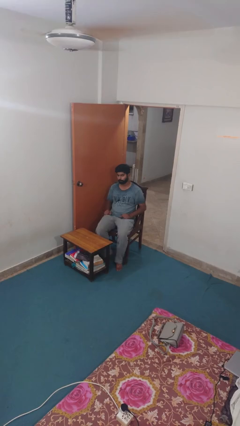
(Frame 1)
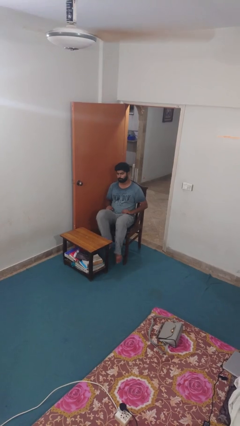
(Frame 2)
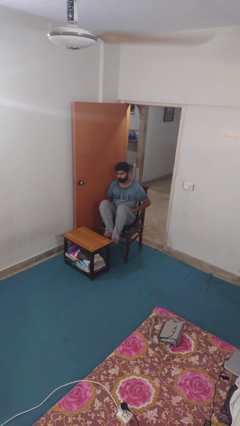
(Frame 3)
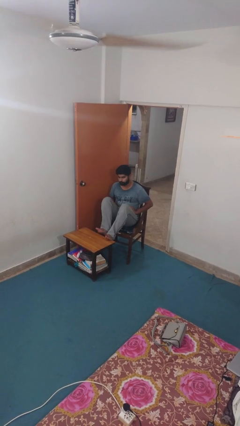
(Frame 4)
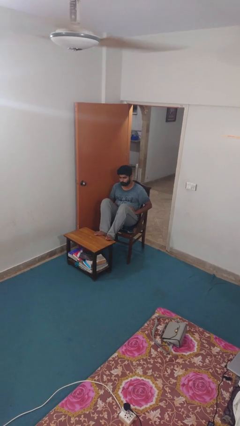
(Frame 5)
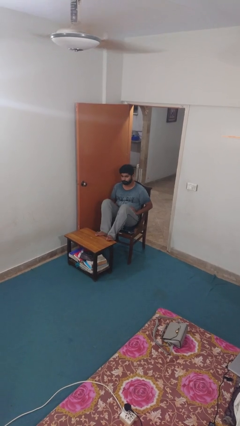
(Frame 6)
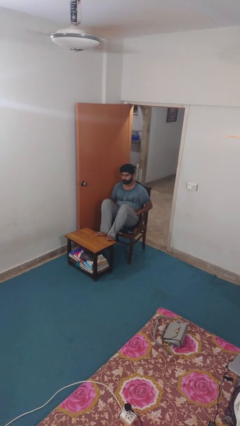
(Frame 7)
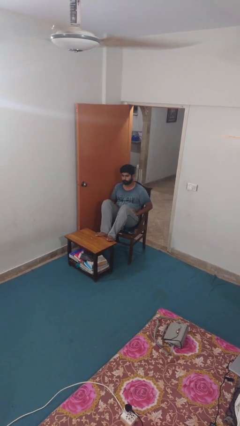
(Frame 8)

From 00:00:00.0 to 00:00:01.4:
person puts feet up

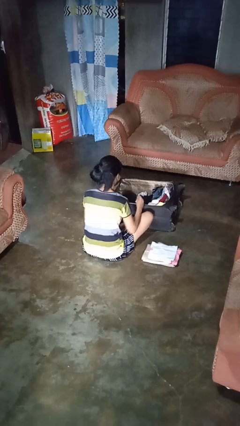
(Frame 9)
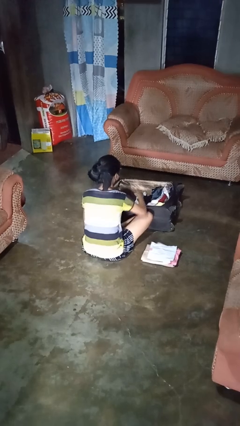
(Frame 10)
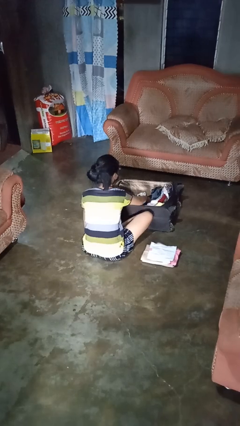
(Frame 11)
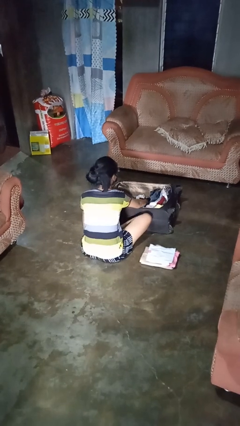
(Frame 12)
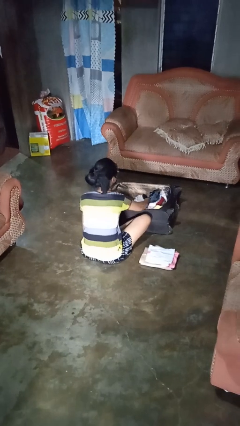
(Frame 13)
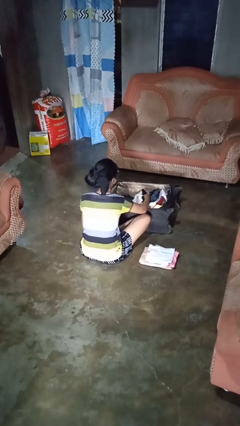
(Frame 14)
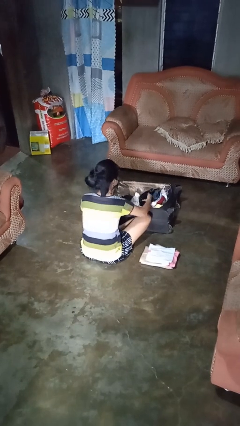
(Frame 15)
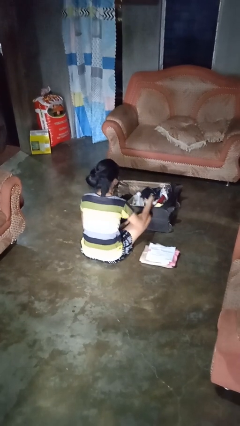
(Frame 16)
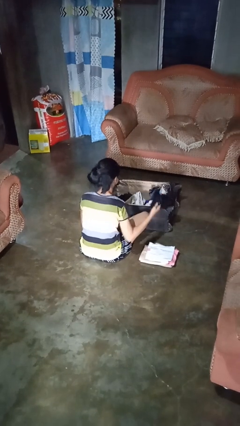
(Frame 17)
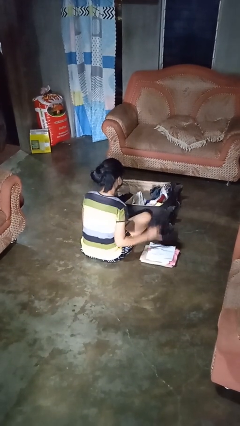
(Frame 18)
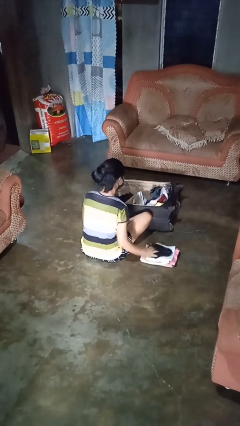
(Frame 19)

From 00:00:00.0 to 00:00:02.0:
person unloads clothes from suitcase

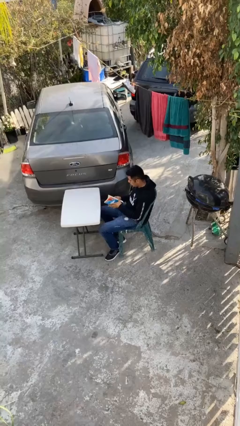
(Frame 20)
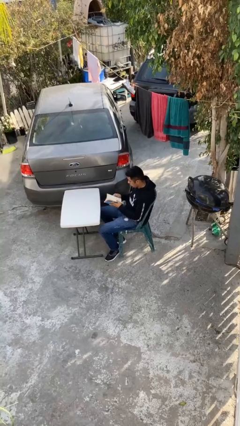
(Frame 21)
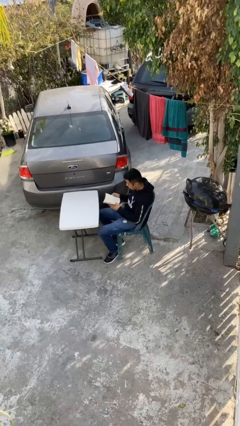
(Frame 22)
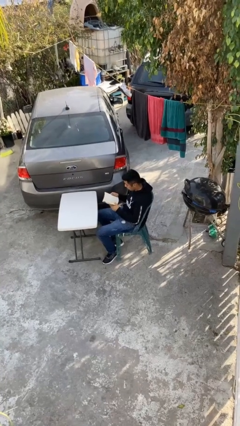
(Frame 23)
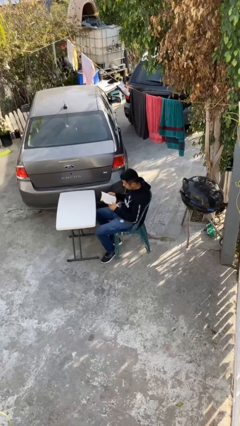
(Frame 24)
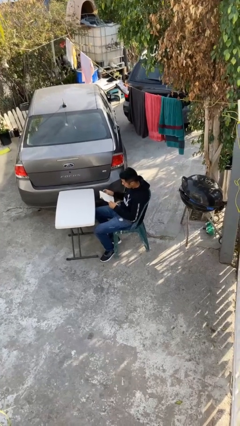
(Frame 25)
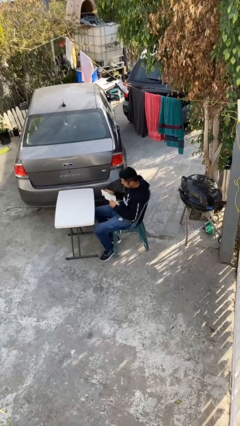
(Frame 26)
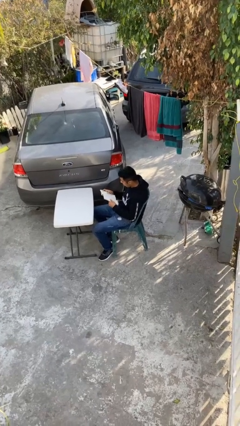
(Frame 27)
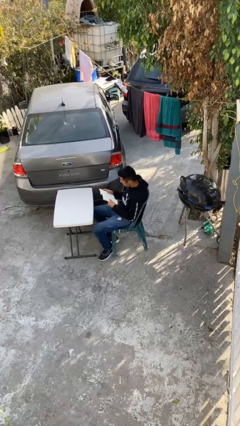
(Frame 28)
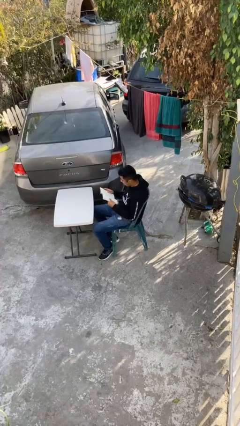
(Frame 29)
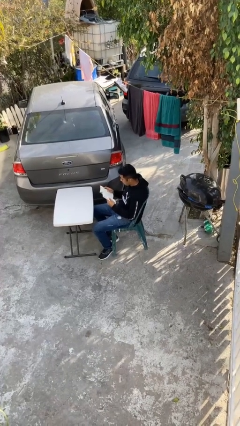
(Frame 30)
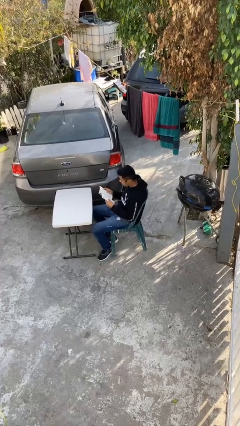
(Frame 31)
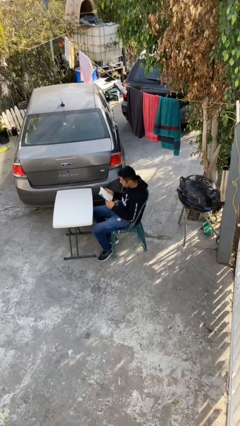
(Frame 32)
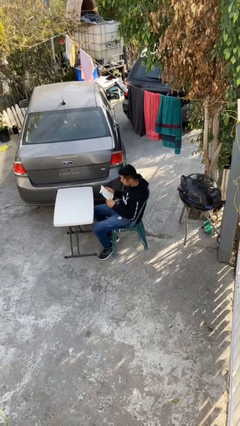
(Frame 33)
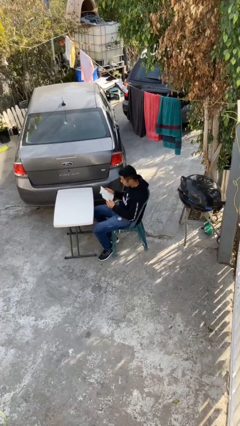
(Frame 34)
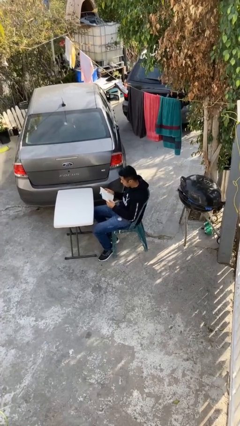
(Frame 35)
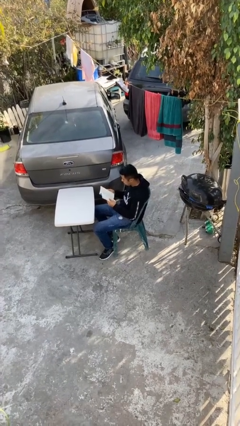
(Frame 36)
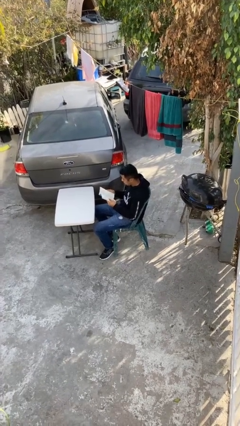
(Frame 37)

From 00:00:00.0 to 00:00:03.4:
person reads document

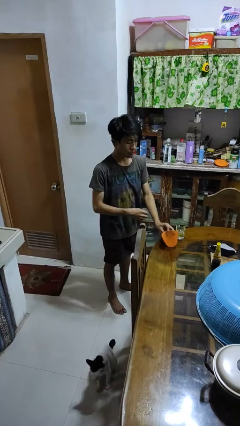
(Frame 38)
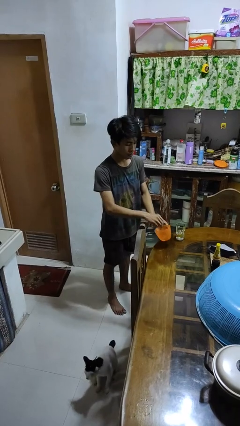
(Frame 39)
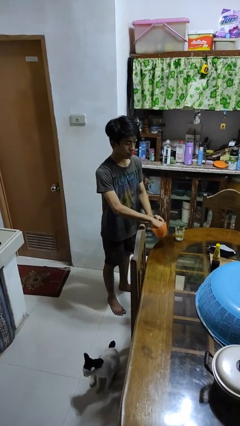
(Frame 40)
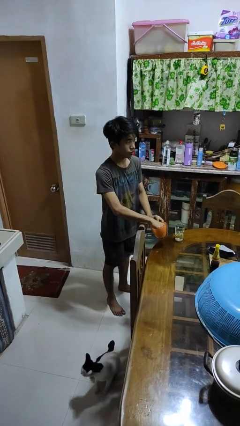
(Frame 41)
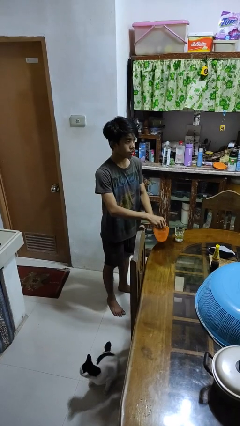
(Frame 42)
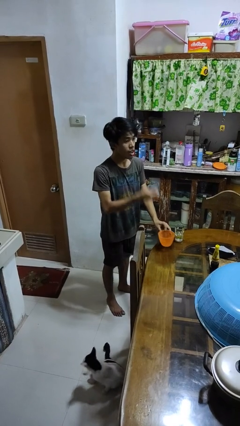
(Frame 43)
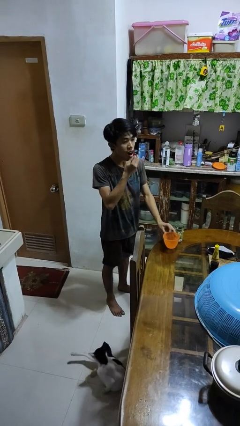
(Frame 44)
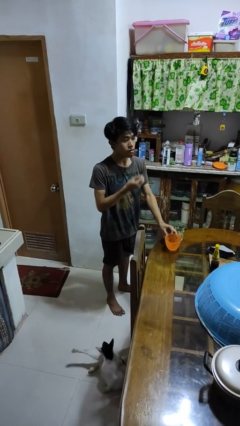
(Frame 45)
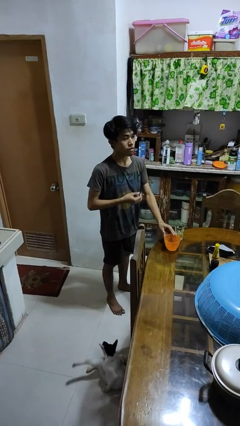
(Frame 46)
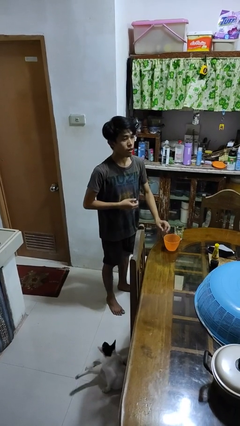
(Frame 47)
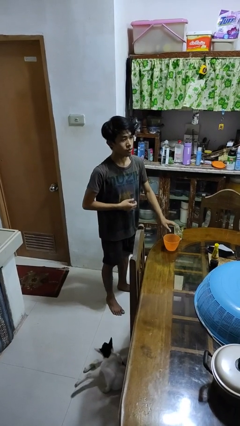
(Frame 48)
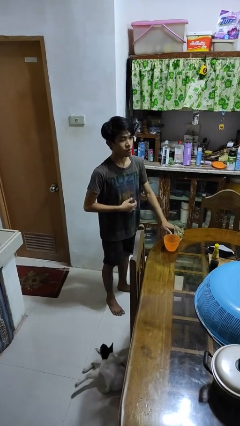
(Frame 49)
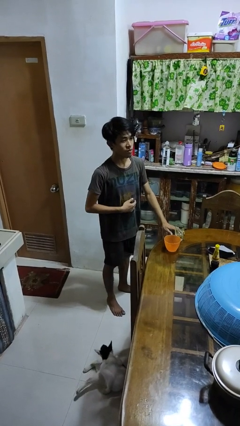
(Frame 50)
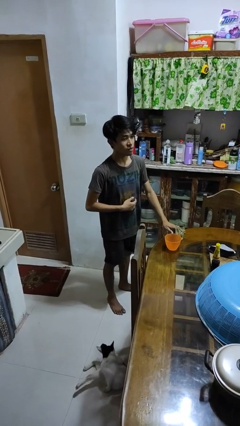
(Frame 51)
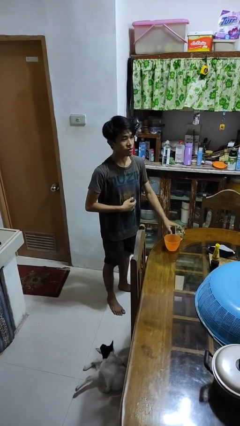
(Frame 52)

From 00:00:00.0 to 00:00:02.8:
person takes medicine pills

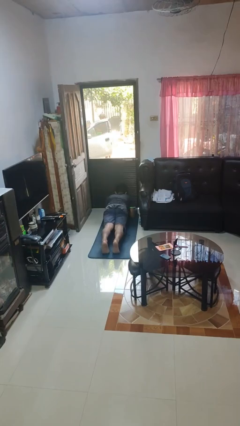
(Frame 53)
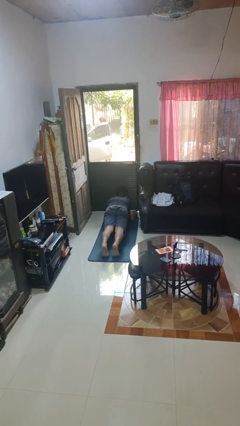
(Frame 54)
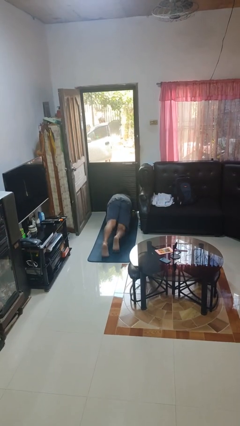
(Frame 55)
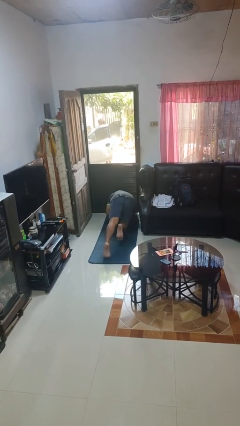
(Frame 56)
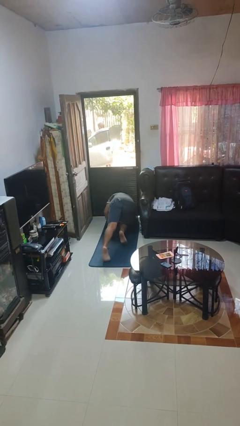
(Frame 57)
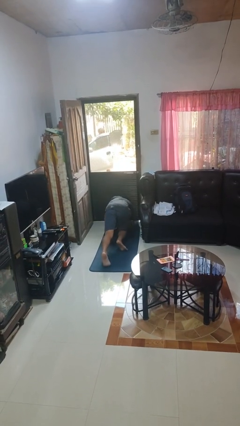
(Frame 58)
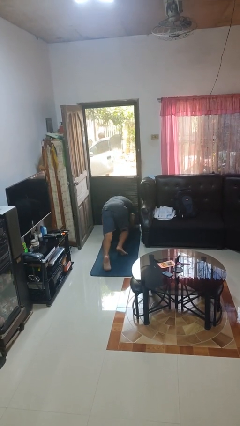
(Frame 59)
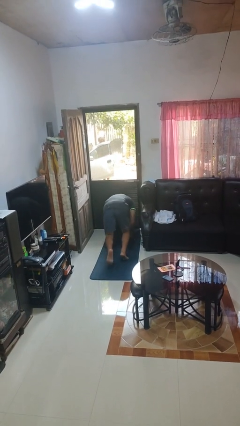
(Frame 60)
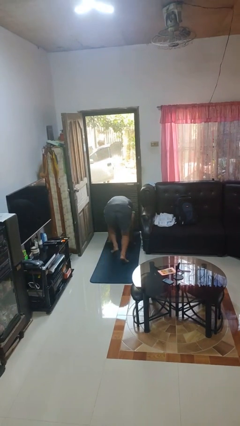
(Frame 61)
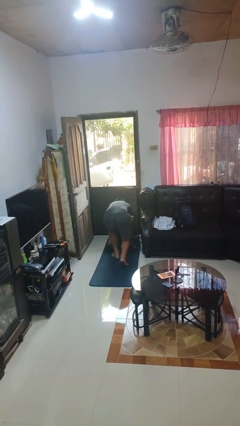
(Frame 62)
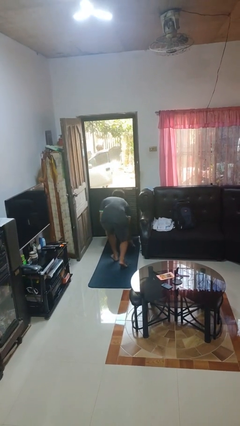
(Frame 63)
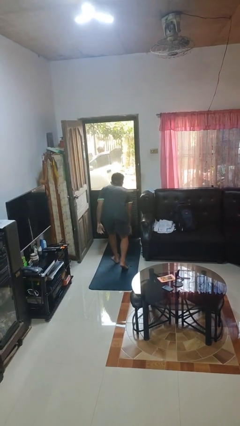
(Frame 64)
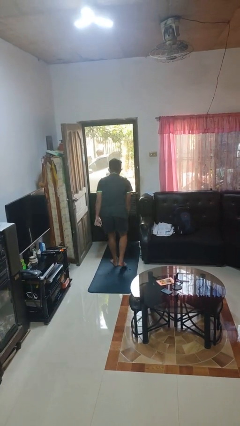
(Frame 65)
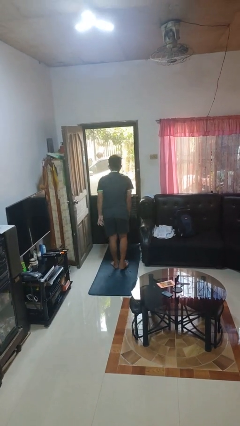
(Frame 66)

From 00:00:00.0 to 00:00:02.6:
person stands up from floor

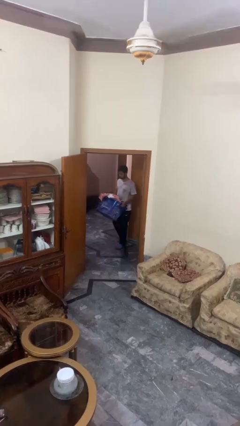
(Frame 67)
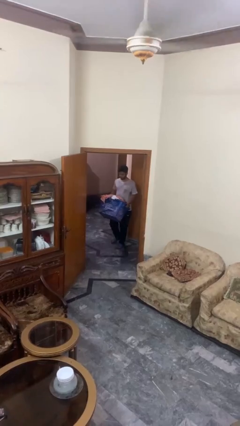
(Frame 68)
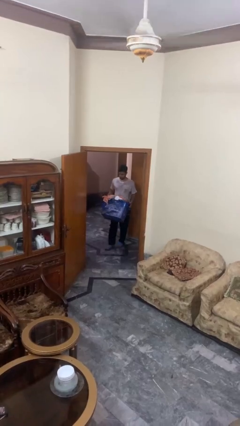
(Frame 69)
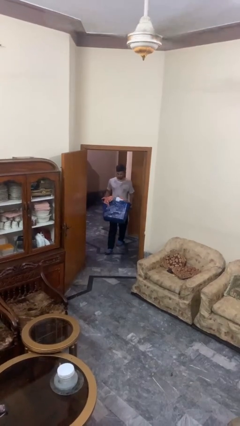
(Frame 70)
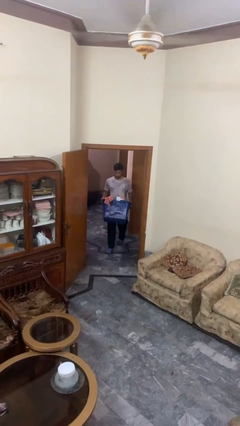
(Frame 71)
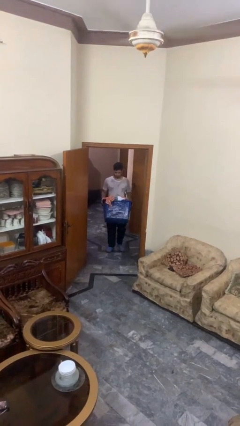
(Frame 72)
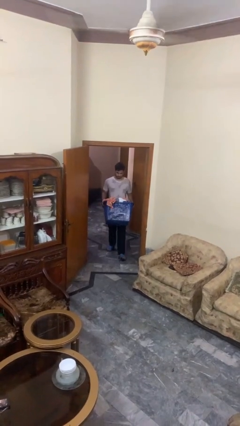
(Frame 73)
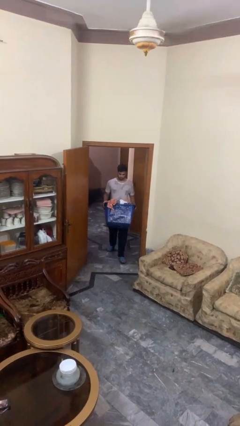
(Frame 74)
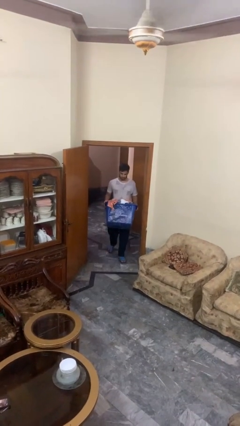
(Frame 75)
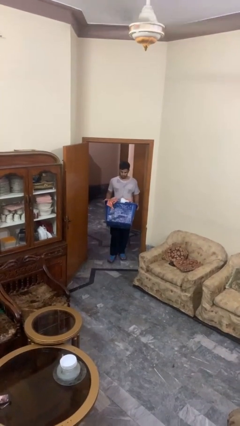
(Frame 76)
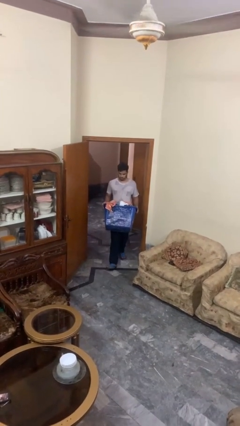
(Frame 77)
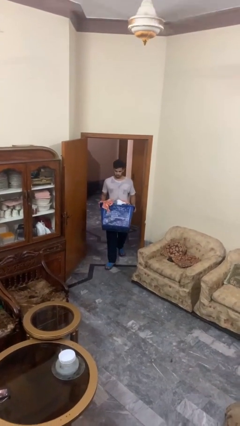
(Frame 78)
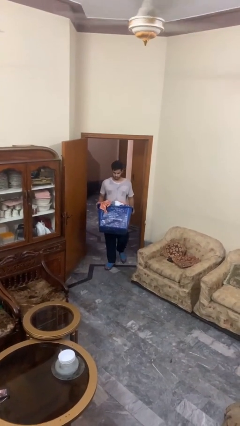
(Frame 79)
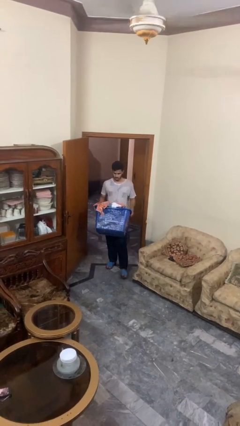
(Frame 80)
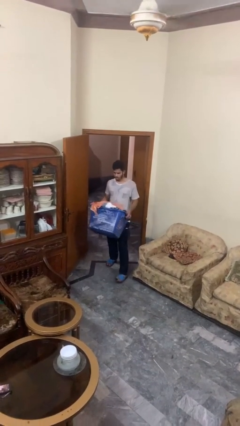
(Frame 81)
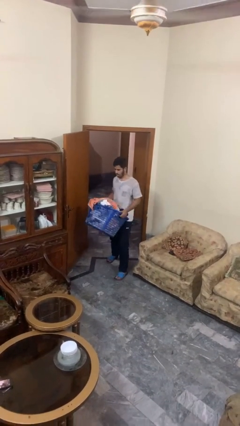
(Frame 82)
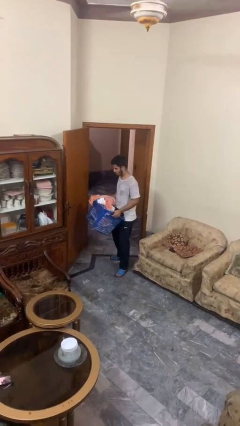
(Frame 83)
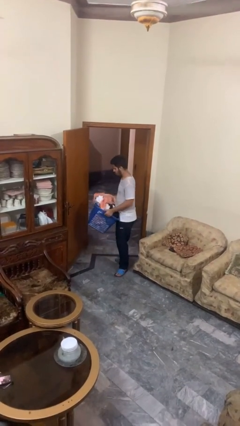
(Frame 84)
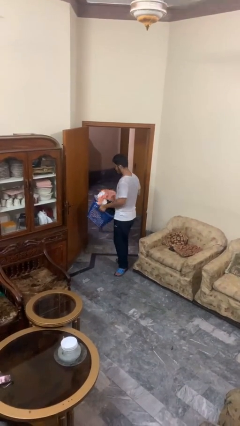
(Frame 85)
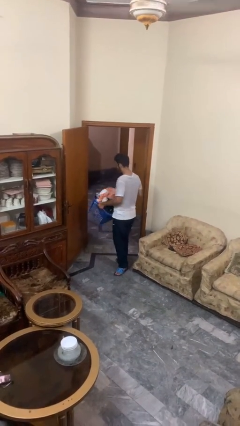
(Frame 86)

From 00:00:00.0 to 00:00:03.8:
person carries laundry basket

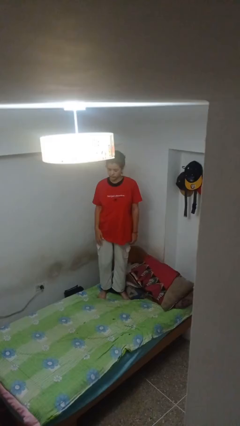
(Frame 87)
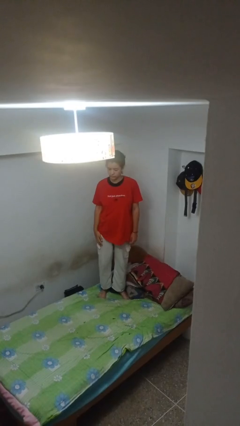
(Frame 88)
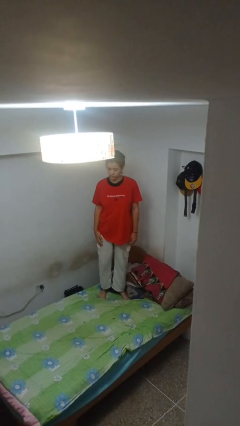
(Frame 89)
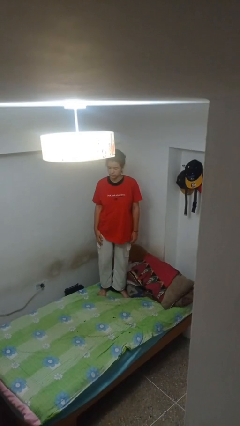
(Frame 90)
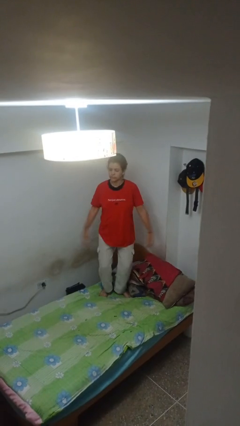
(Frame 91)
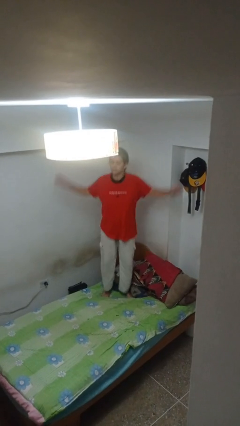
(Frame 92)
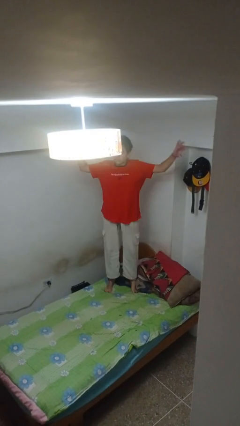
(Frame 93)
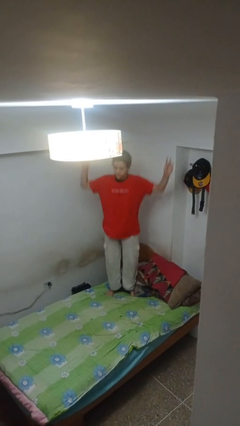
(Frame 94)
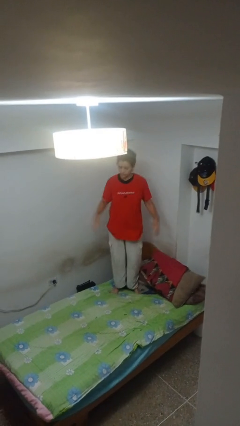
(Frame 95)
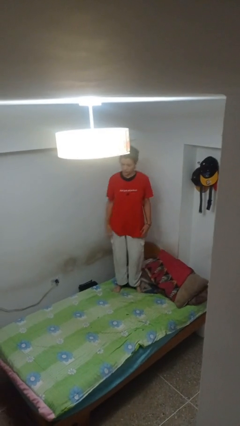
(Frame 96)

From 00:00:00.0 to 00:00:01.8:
person jumps on bed
